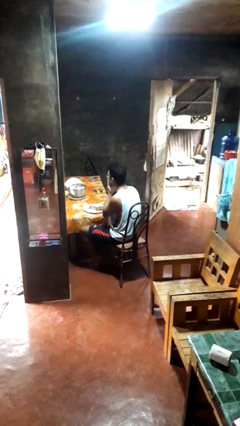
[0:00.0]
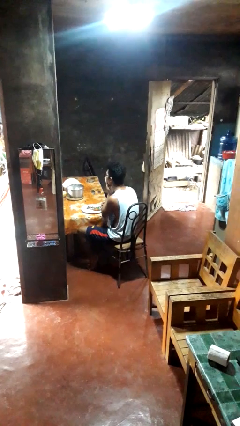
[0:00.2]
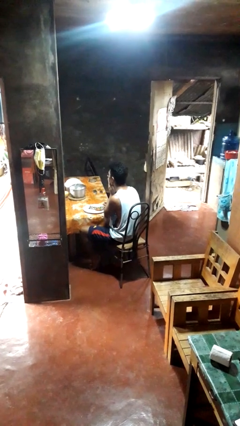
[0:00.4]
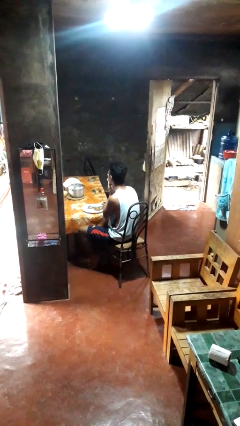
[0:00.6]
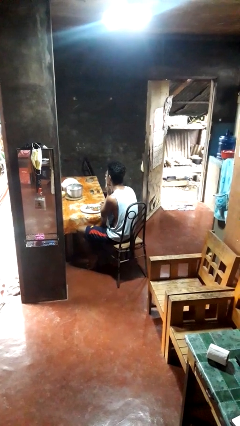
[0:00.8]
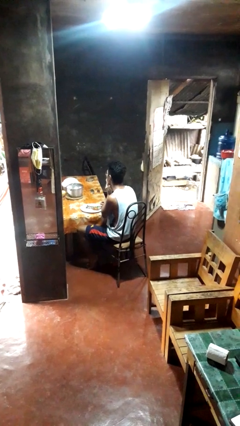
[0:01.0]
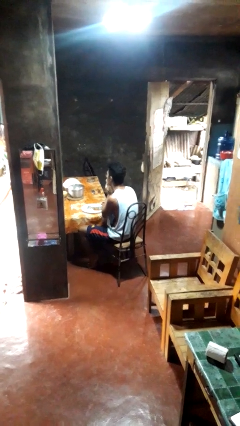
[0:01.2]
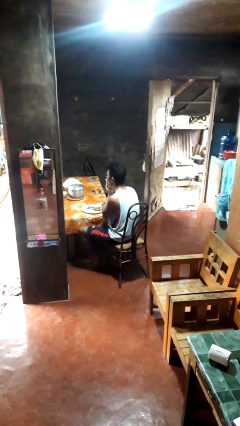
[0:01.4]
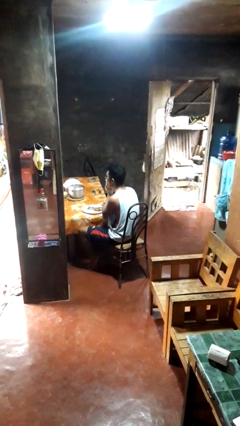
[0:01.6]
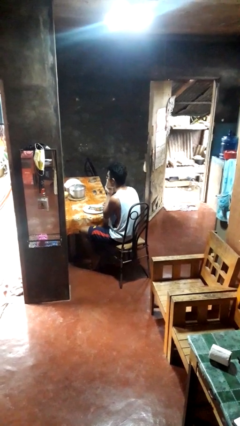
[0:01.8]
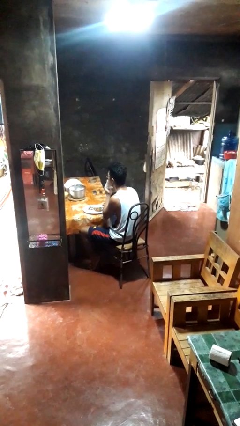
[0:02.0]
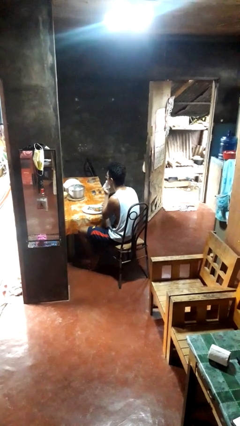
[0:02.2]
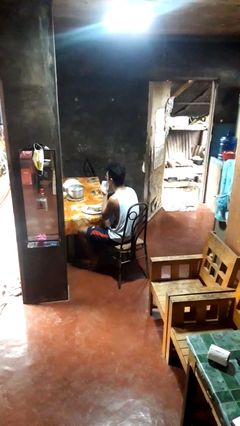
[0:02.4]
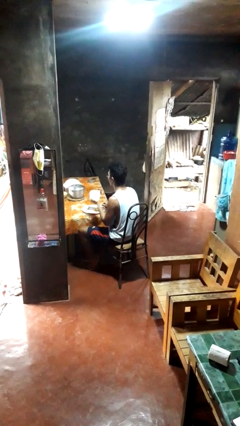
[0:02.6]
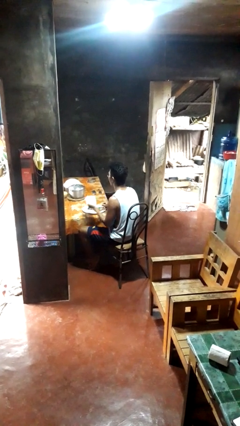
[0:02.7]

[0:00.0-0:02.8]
person wipes mouth with napkin

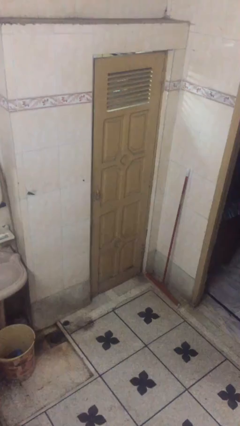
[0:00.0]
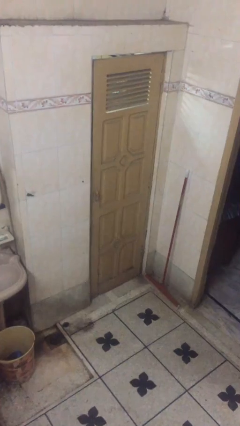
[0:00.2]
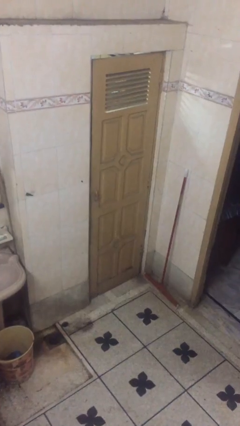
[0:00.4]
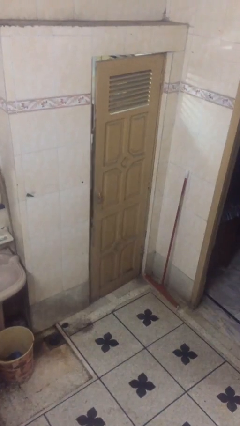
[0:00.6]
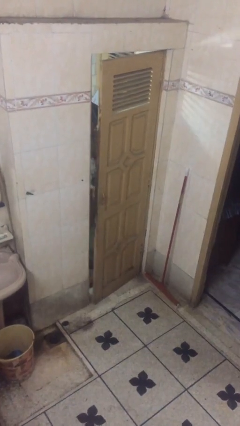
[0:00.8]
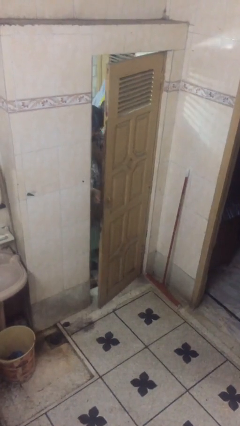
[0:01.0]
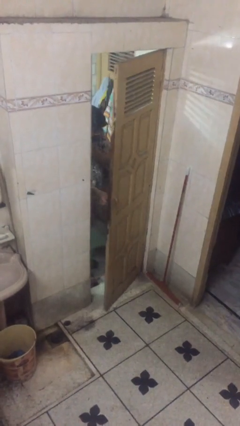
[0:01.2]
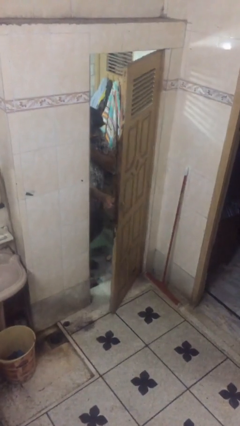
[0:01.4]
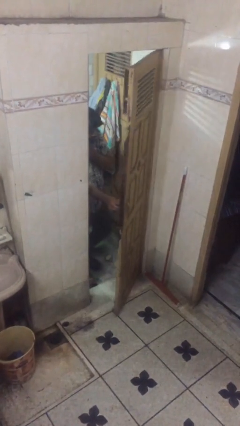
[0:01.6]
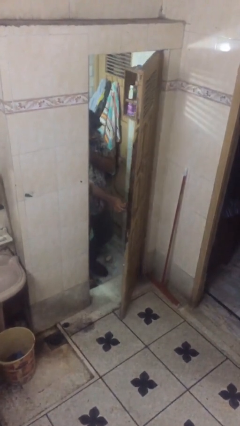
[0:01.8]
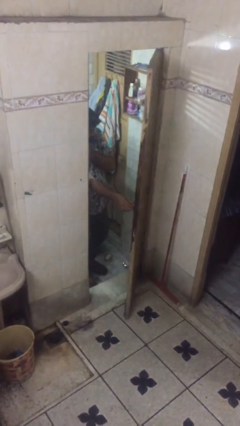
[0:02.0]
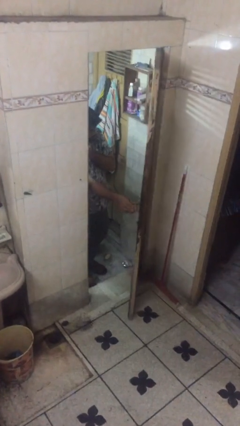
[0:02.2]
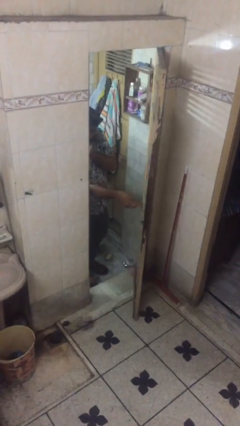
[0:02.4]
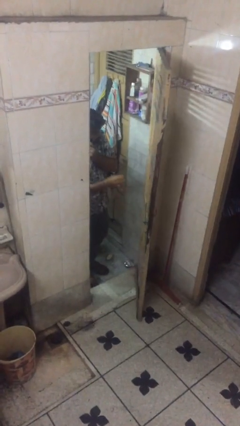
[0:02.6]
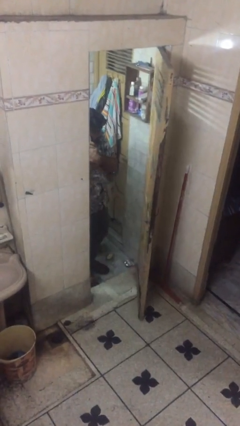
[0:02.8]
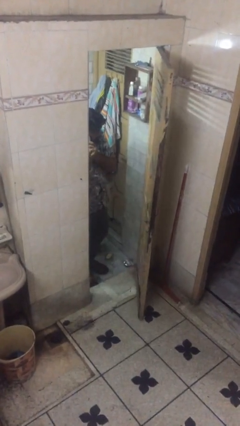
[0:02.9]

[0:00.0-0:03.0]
person opens facility door

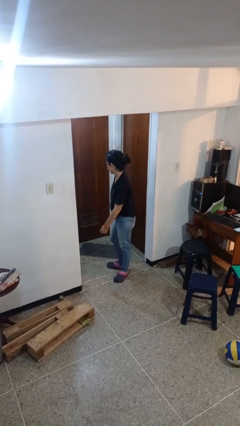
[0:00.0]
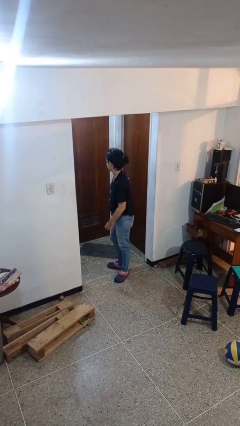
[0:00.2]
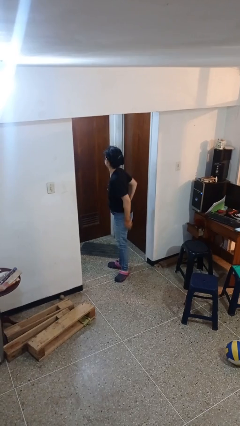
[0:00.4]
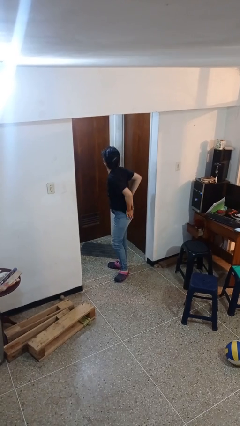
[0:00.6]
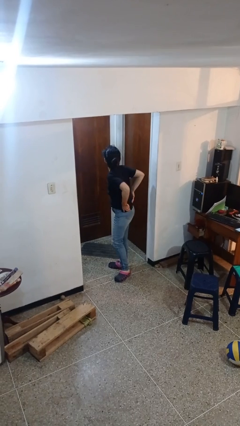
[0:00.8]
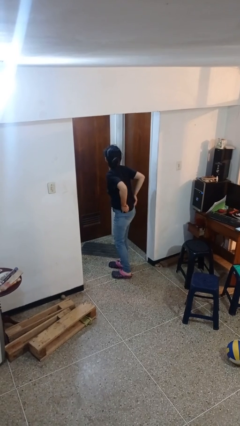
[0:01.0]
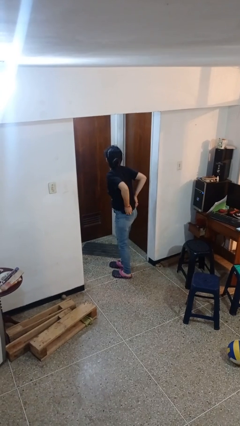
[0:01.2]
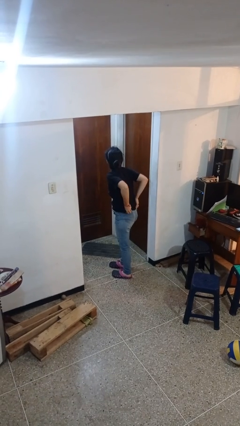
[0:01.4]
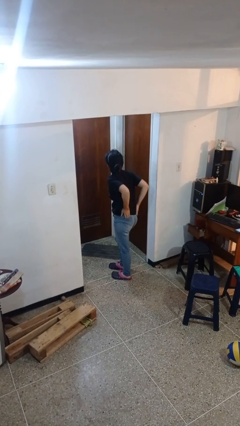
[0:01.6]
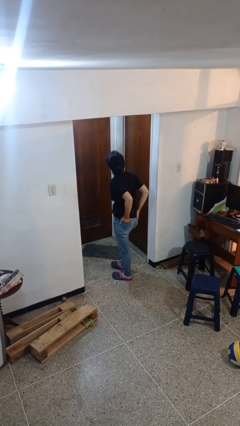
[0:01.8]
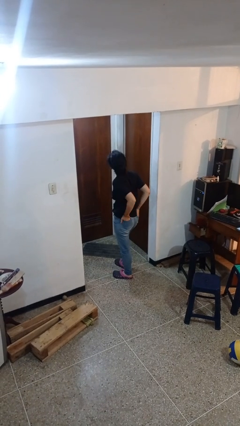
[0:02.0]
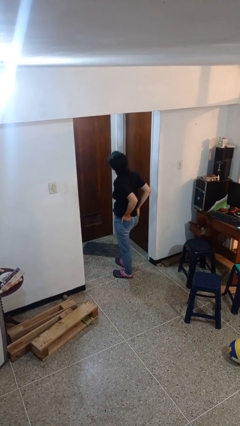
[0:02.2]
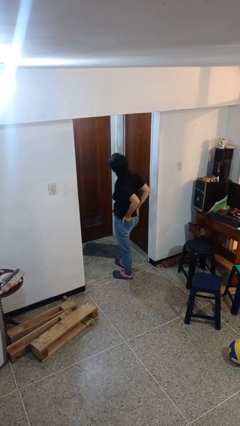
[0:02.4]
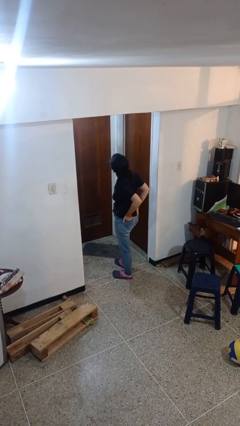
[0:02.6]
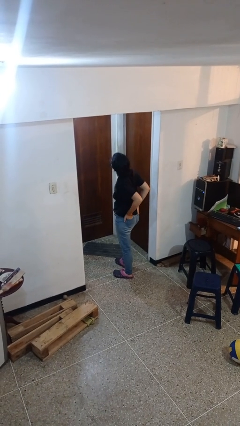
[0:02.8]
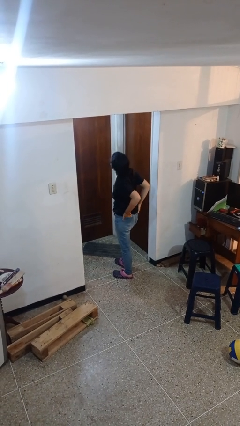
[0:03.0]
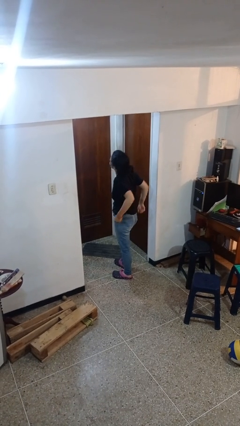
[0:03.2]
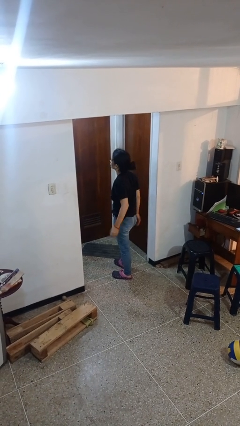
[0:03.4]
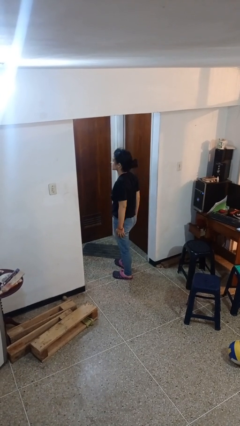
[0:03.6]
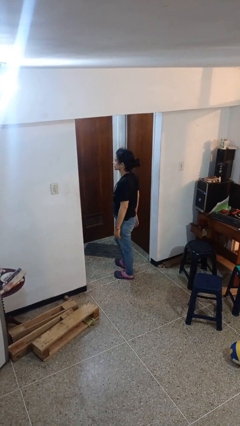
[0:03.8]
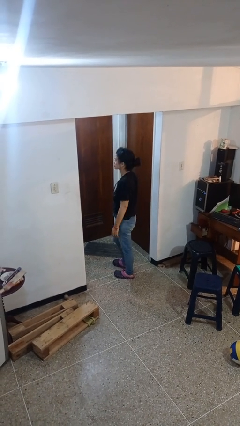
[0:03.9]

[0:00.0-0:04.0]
person puts hands in back pockets

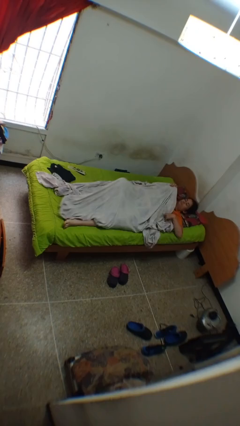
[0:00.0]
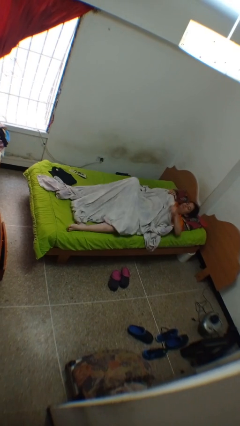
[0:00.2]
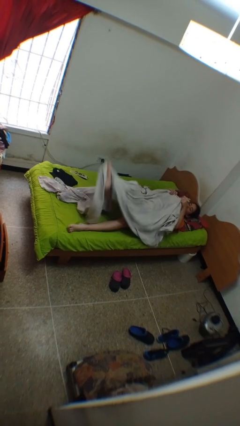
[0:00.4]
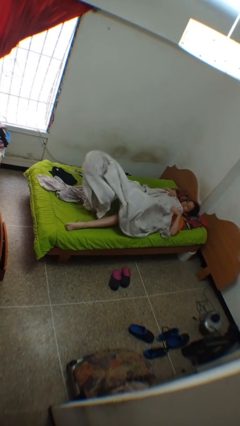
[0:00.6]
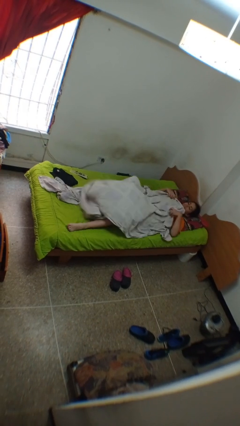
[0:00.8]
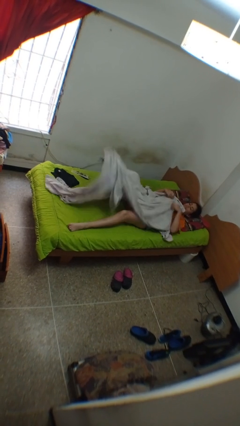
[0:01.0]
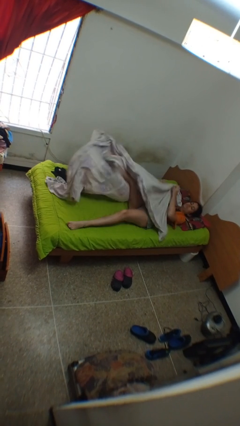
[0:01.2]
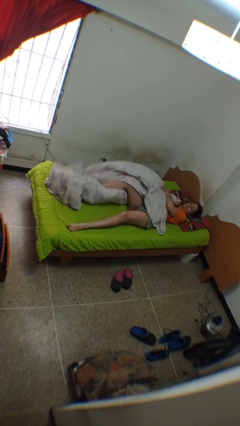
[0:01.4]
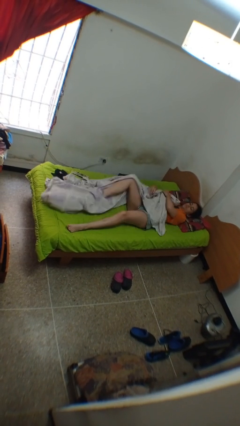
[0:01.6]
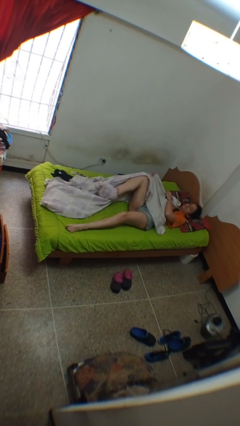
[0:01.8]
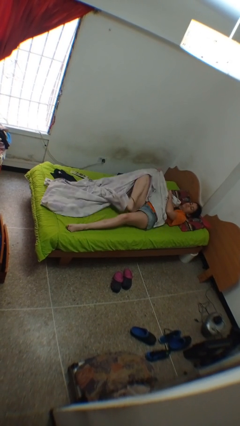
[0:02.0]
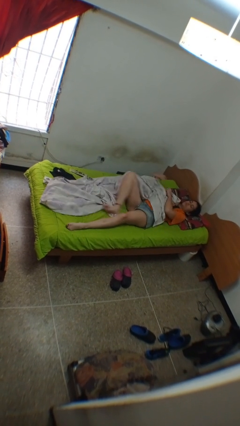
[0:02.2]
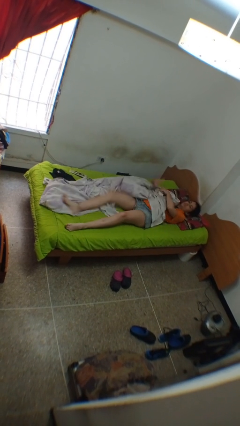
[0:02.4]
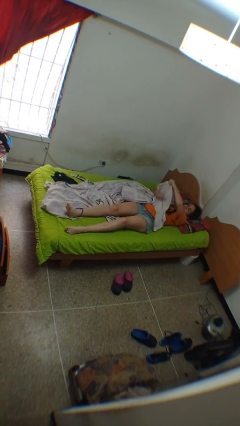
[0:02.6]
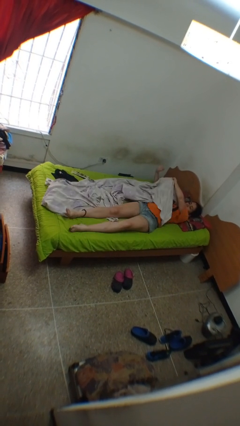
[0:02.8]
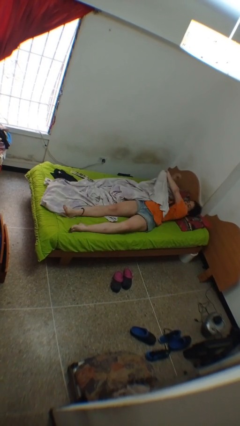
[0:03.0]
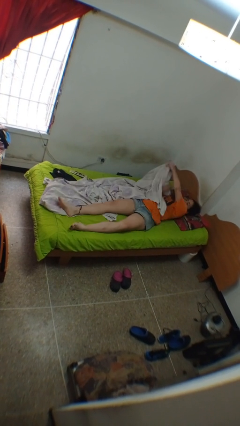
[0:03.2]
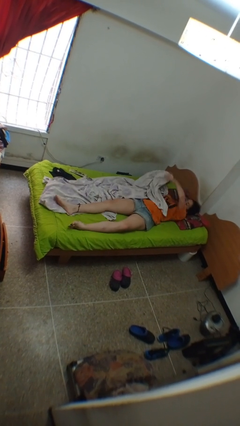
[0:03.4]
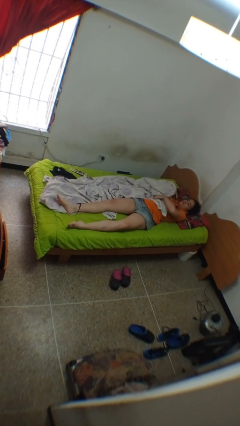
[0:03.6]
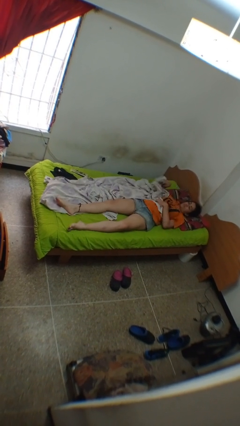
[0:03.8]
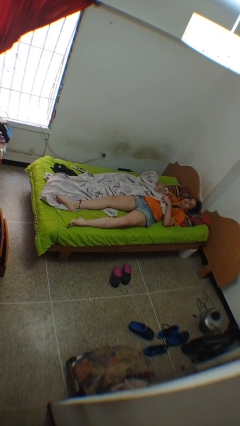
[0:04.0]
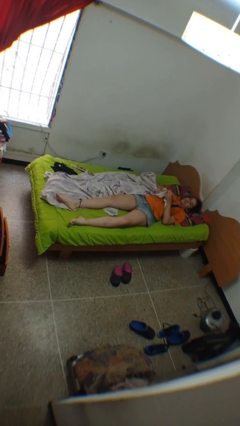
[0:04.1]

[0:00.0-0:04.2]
person uncovers with bedsheets

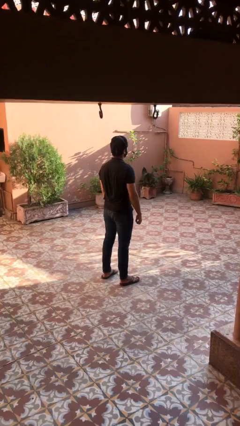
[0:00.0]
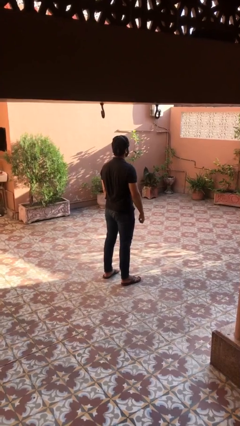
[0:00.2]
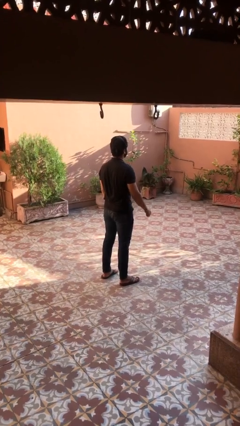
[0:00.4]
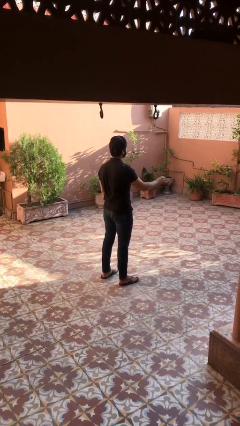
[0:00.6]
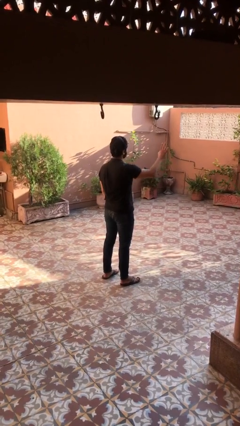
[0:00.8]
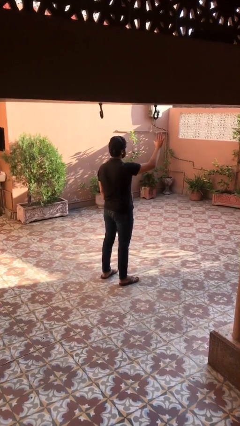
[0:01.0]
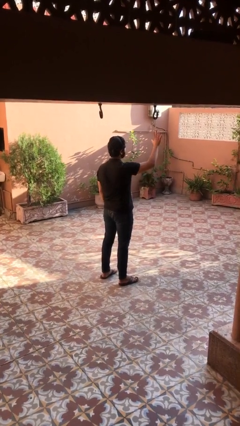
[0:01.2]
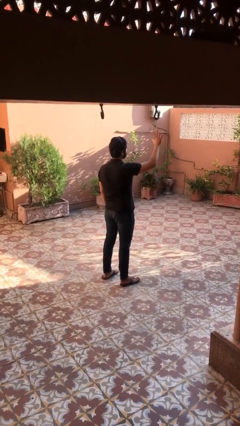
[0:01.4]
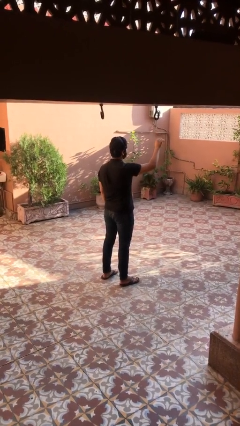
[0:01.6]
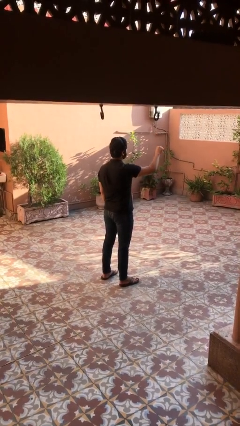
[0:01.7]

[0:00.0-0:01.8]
person gestures number five

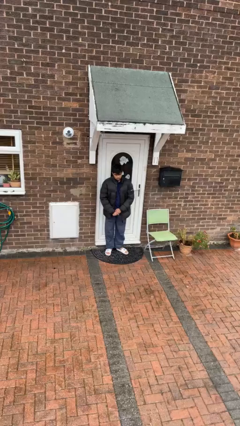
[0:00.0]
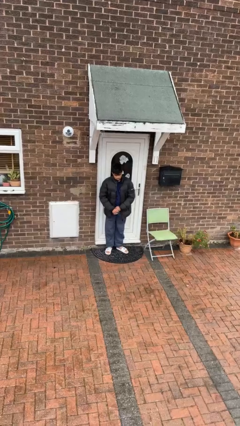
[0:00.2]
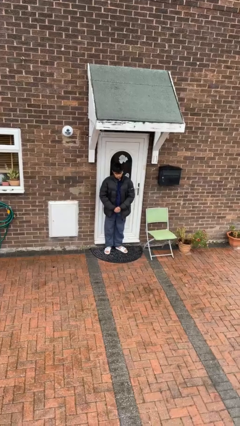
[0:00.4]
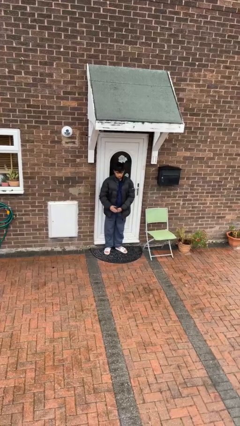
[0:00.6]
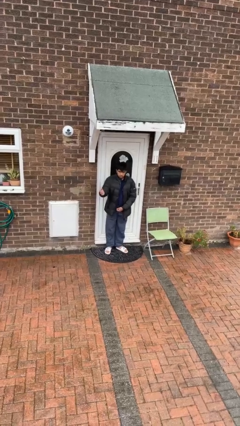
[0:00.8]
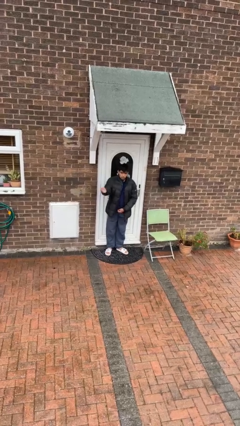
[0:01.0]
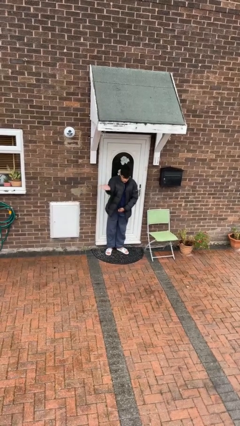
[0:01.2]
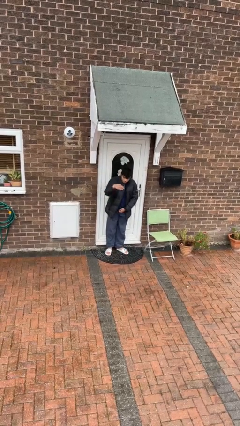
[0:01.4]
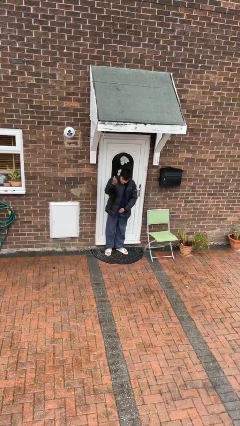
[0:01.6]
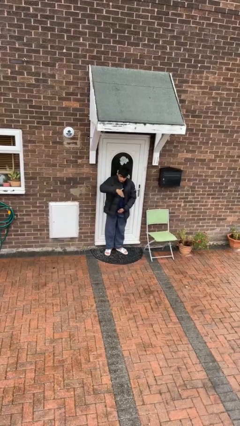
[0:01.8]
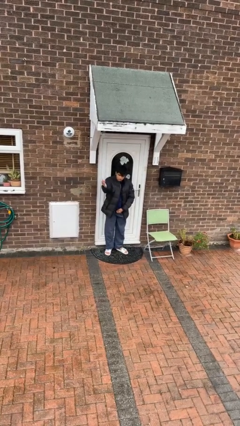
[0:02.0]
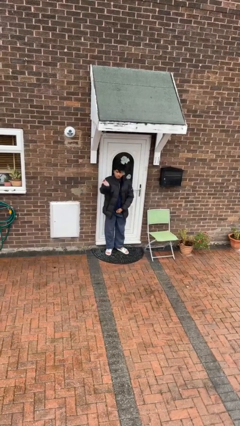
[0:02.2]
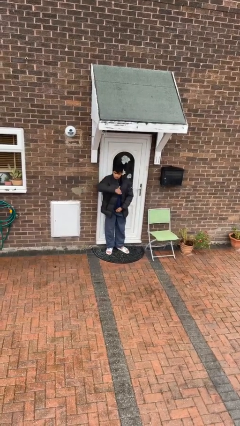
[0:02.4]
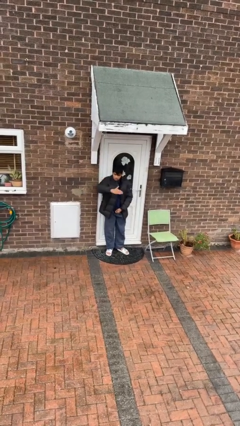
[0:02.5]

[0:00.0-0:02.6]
person gestures come here
